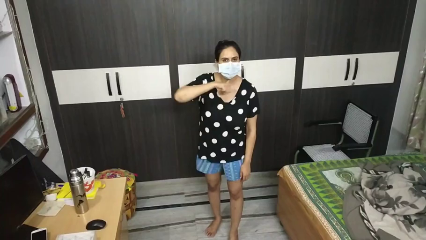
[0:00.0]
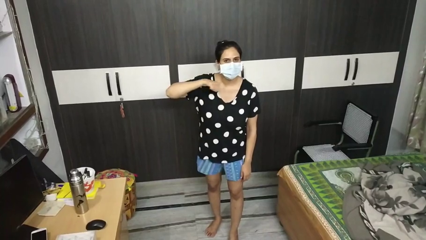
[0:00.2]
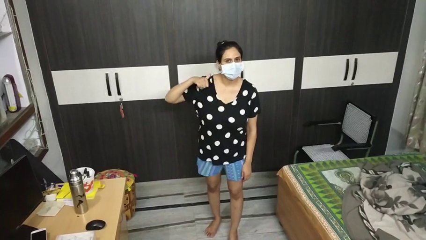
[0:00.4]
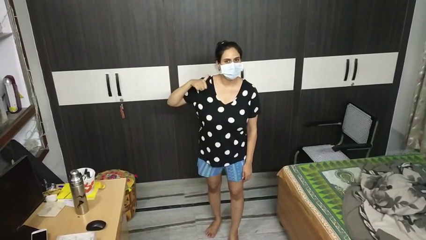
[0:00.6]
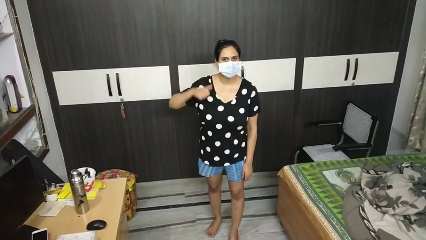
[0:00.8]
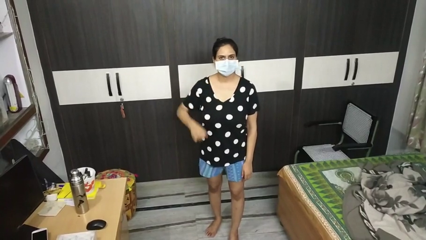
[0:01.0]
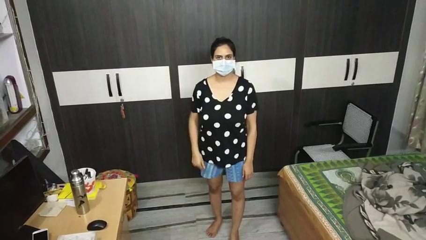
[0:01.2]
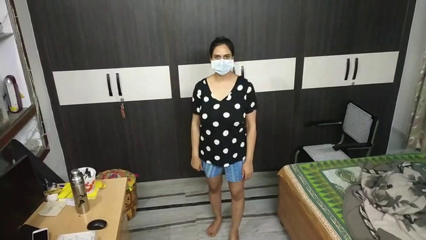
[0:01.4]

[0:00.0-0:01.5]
person gestures cut

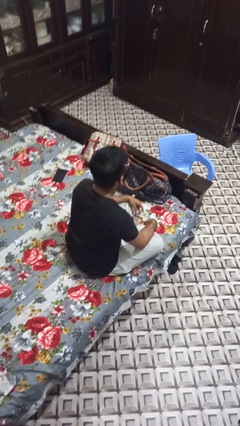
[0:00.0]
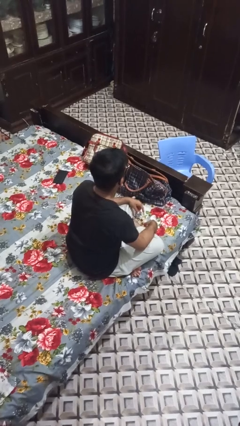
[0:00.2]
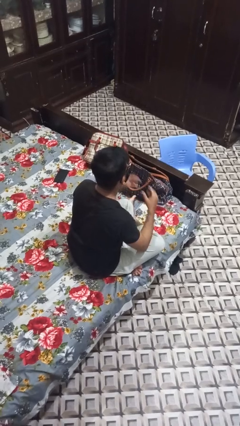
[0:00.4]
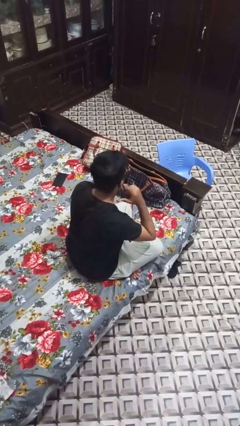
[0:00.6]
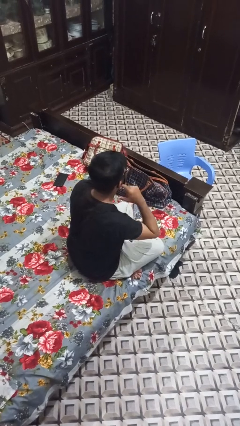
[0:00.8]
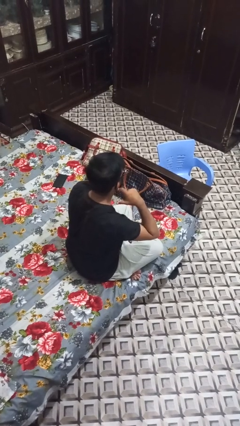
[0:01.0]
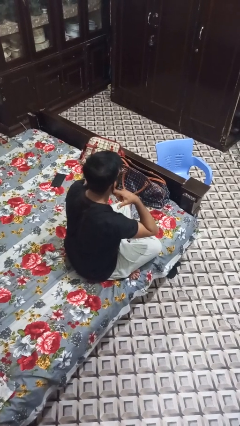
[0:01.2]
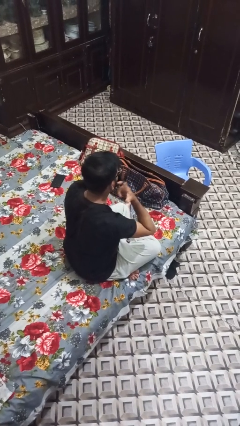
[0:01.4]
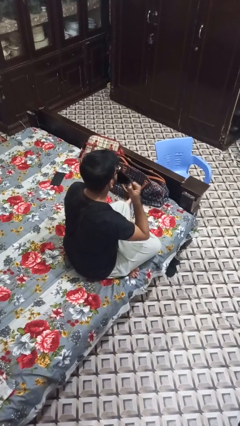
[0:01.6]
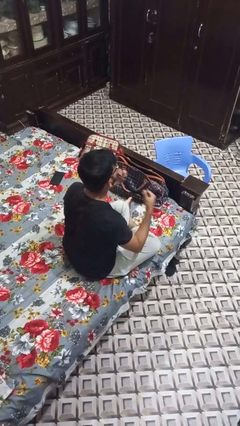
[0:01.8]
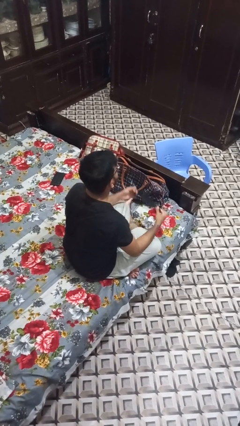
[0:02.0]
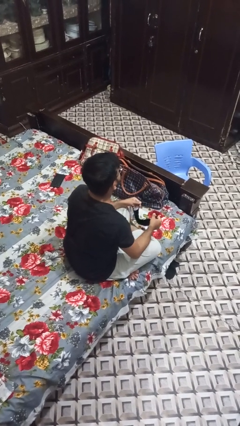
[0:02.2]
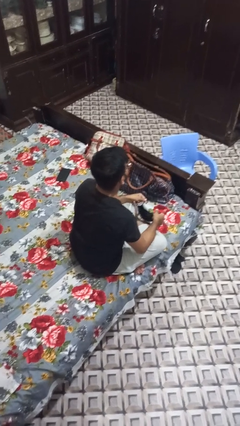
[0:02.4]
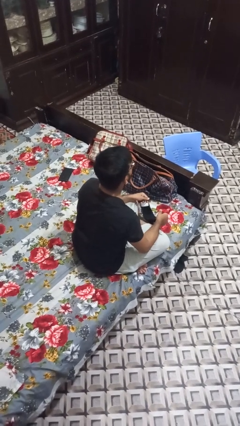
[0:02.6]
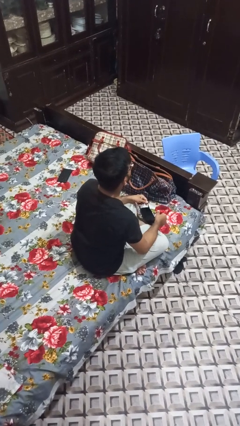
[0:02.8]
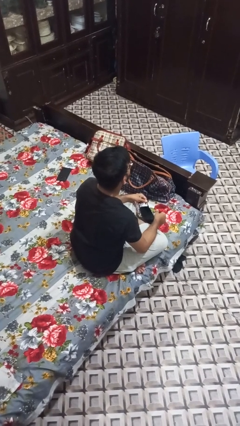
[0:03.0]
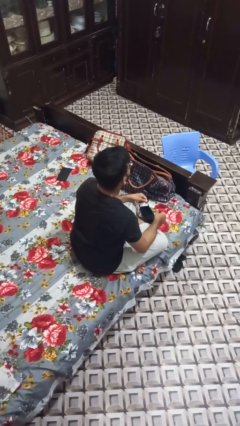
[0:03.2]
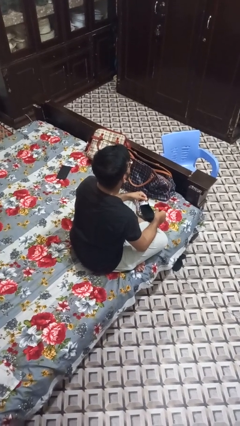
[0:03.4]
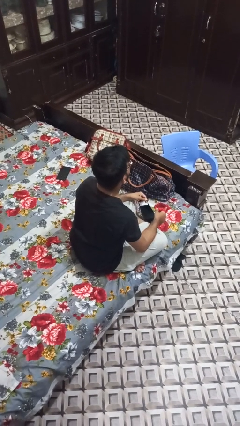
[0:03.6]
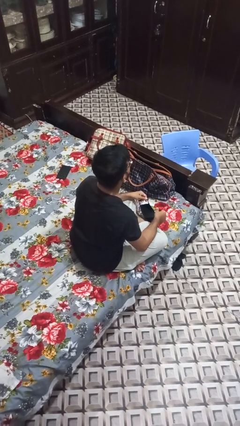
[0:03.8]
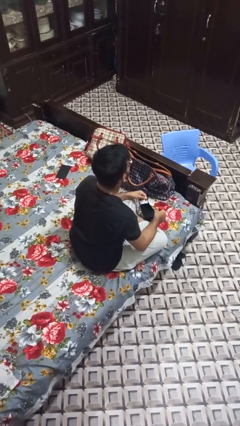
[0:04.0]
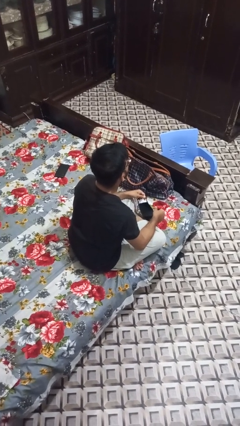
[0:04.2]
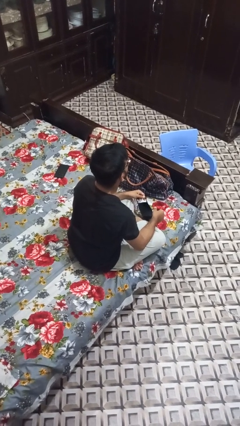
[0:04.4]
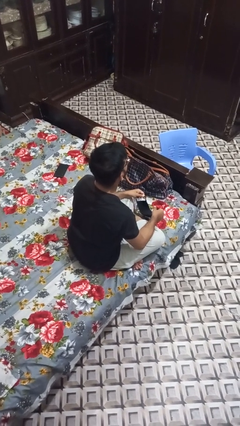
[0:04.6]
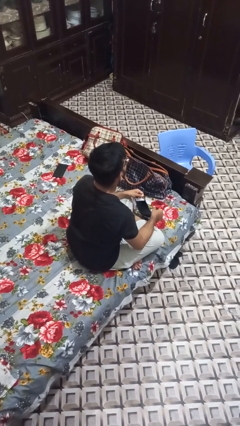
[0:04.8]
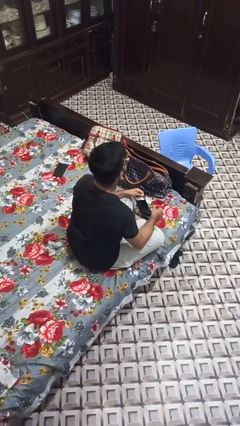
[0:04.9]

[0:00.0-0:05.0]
person takes off facemask

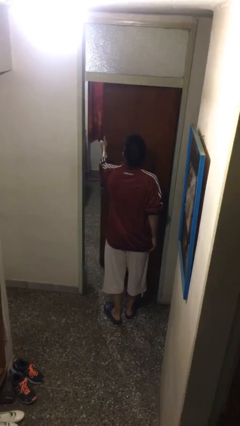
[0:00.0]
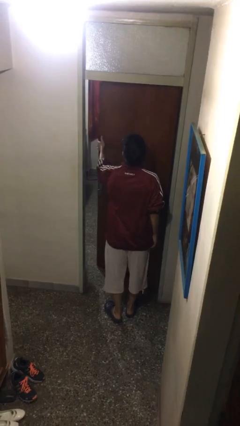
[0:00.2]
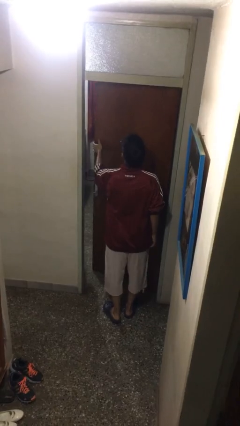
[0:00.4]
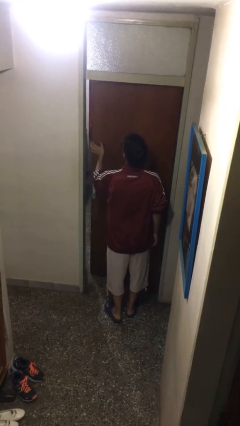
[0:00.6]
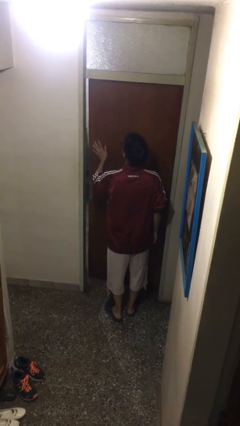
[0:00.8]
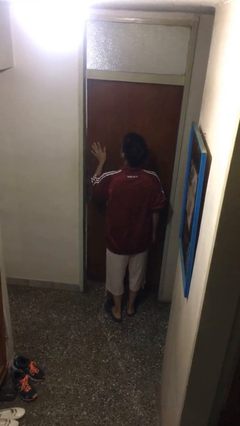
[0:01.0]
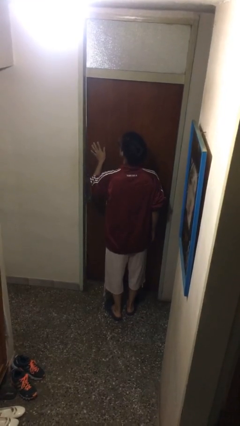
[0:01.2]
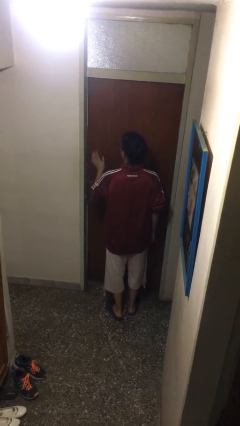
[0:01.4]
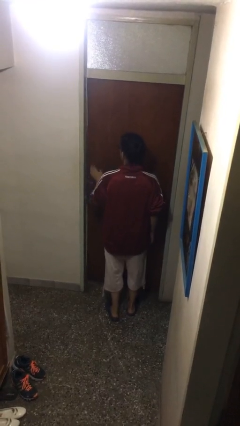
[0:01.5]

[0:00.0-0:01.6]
person closes facility door

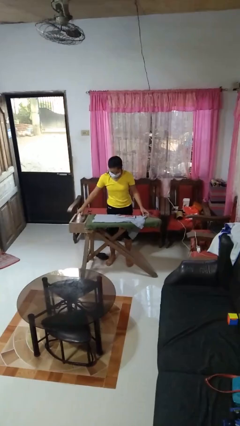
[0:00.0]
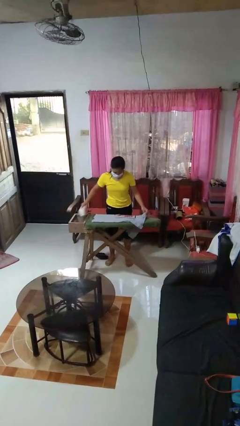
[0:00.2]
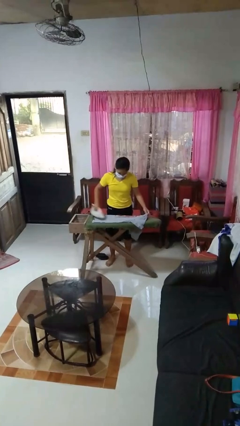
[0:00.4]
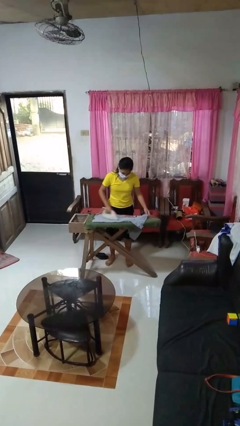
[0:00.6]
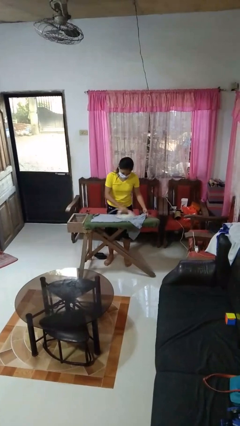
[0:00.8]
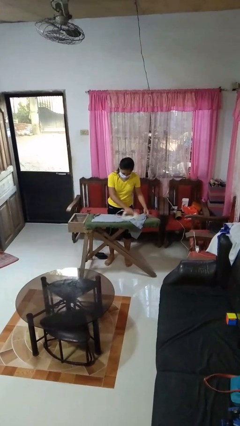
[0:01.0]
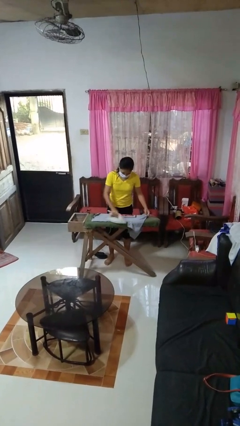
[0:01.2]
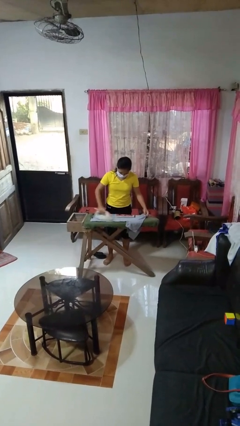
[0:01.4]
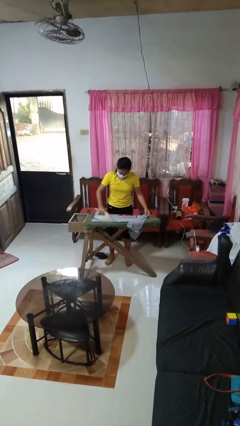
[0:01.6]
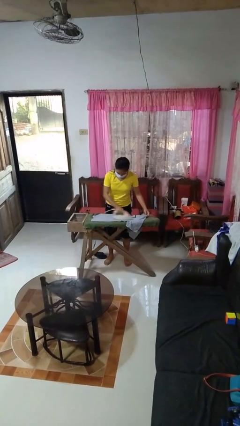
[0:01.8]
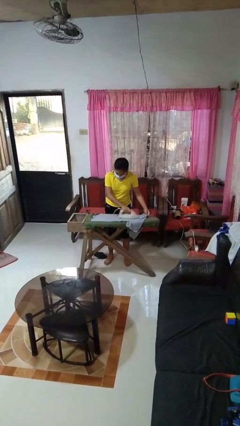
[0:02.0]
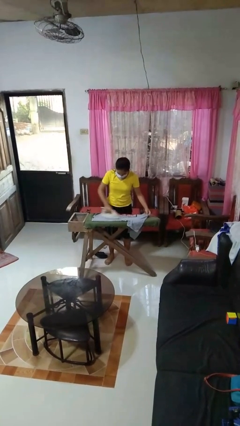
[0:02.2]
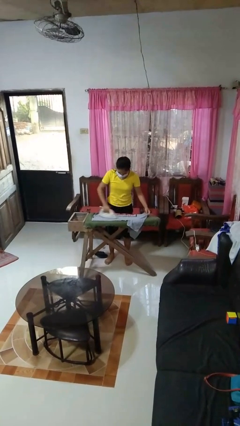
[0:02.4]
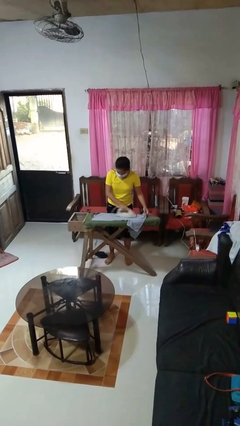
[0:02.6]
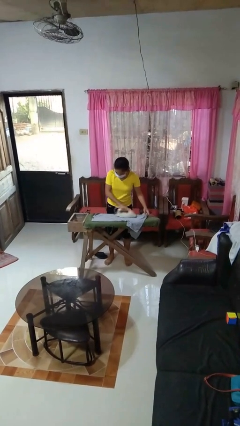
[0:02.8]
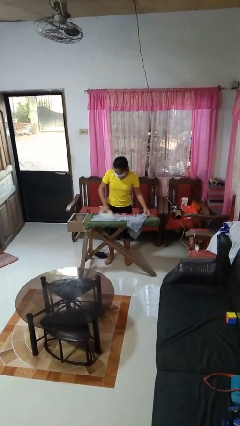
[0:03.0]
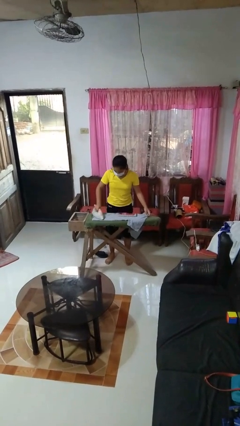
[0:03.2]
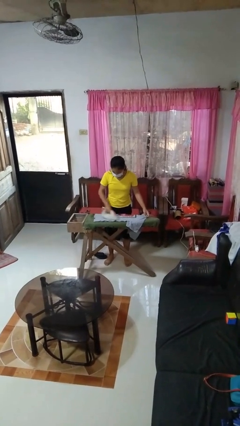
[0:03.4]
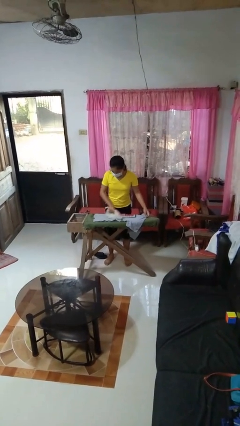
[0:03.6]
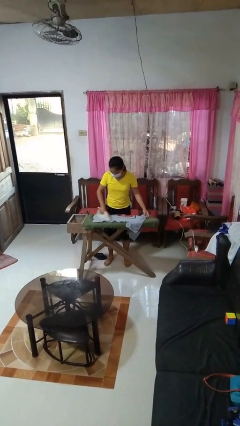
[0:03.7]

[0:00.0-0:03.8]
person irons clothes

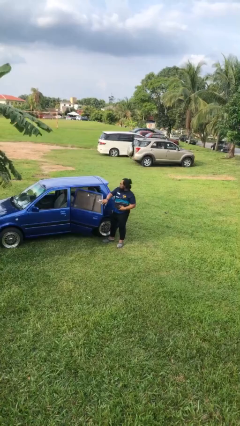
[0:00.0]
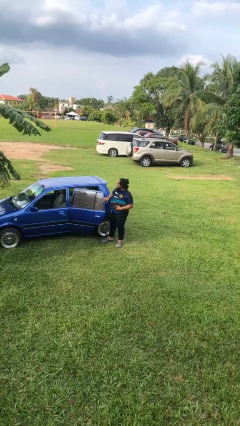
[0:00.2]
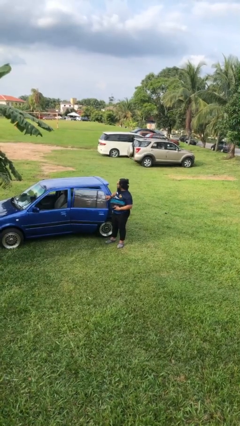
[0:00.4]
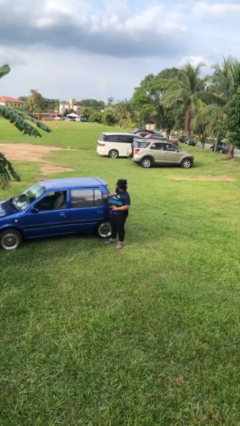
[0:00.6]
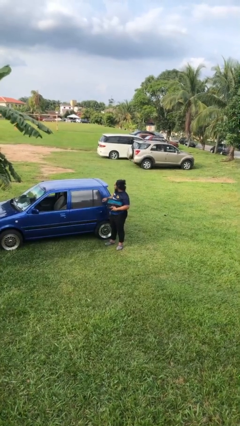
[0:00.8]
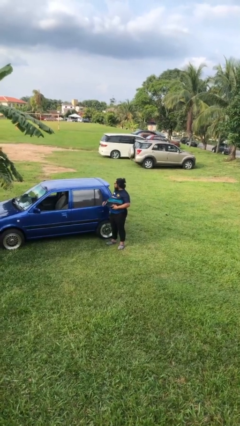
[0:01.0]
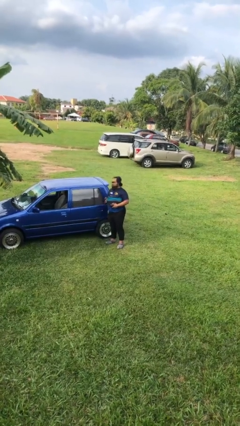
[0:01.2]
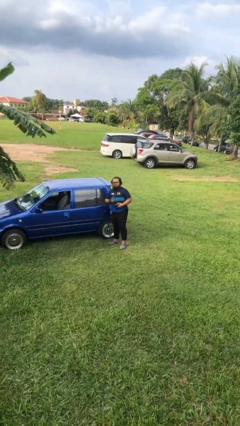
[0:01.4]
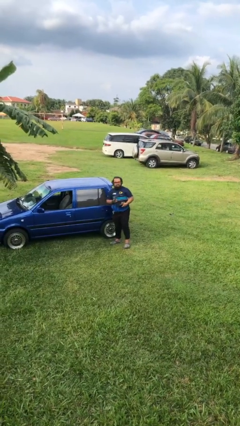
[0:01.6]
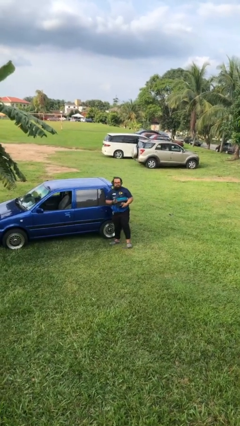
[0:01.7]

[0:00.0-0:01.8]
person closes car door

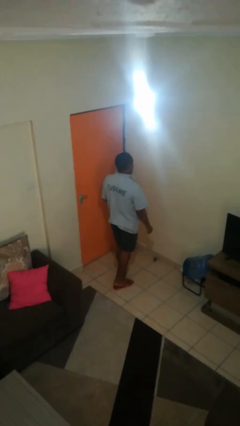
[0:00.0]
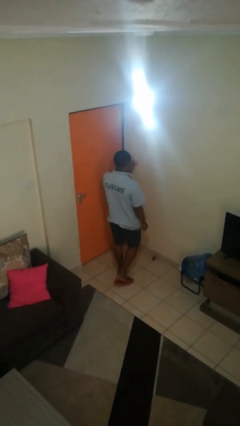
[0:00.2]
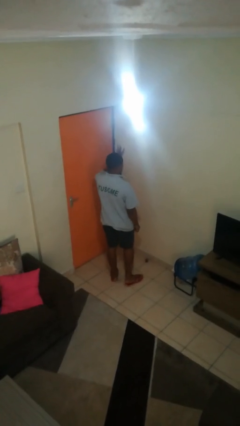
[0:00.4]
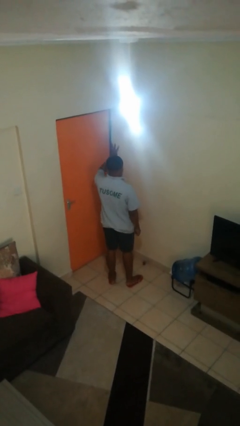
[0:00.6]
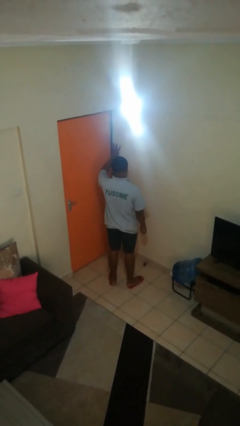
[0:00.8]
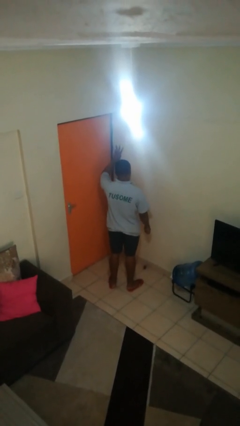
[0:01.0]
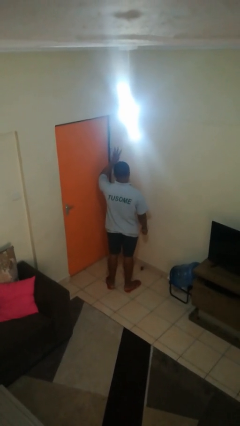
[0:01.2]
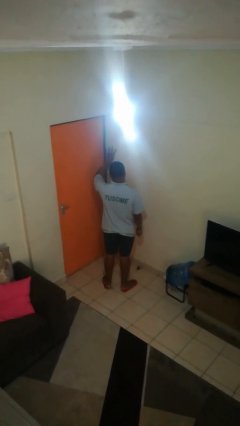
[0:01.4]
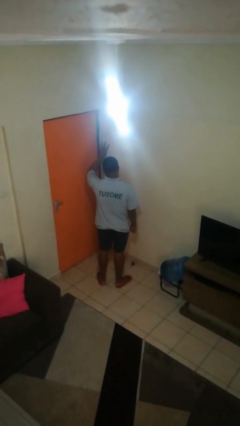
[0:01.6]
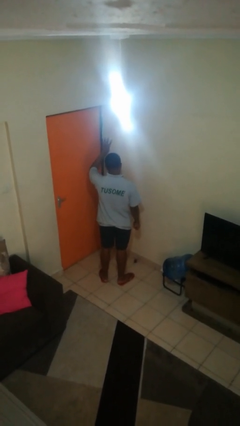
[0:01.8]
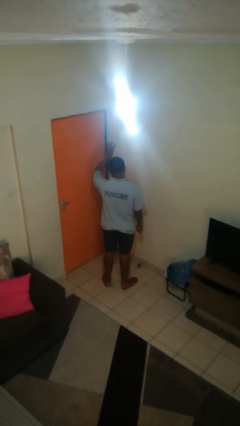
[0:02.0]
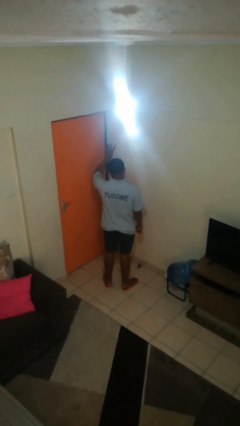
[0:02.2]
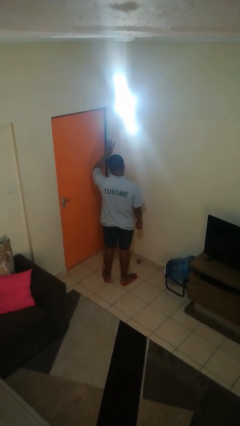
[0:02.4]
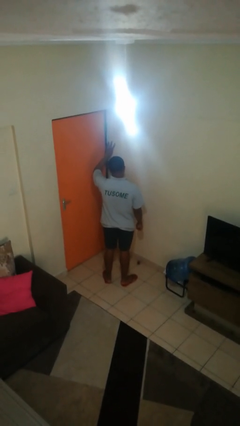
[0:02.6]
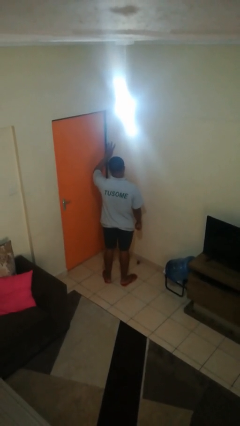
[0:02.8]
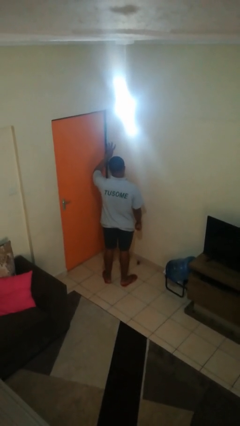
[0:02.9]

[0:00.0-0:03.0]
person gestures number three

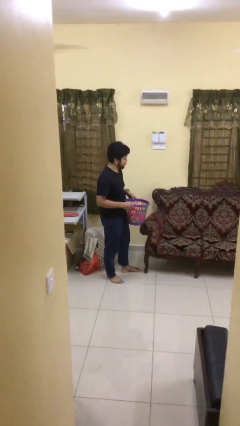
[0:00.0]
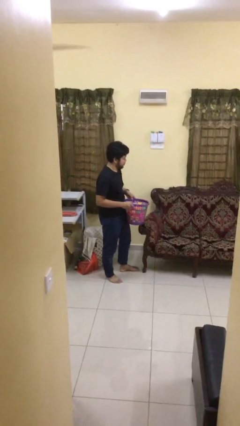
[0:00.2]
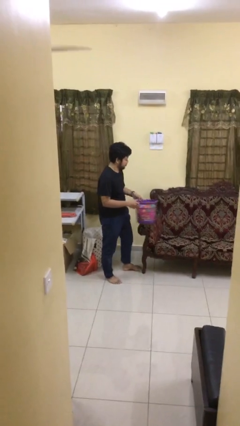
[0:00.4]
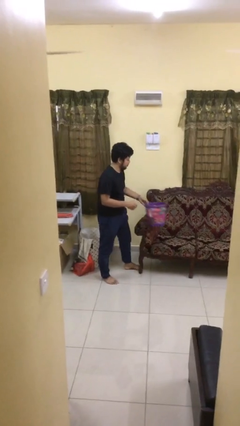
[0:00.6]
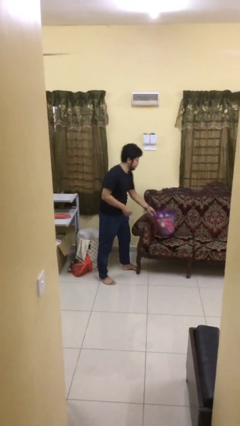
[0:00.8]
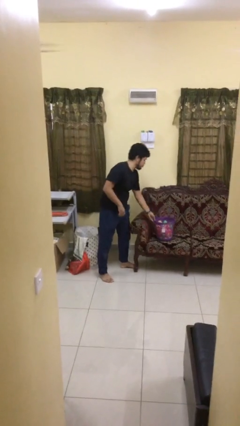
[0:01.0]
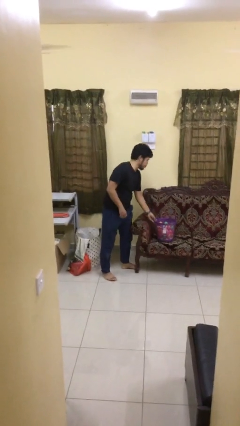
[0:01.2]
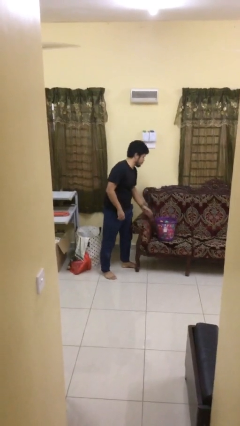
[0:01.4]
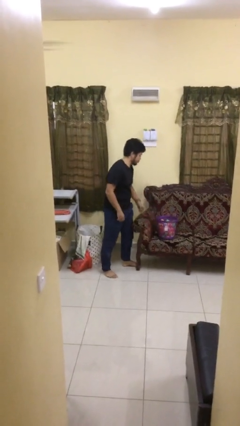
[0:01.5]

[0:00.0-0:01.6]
person puts down object on couch
